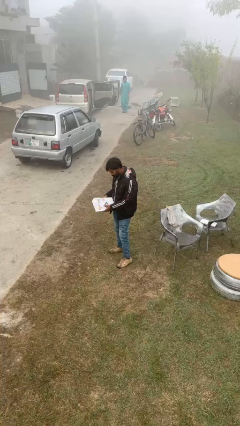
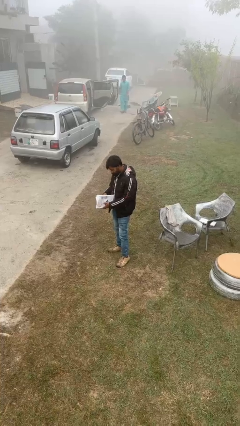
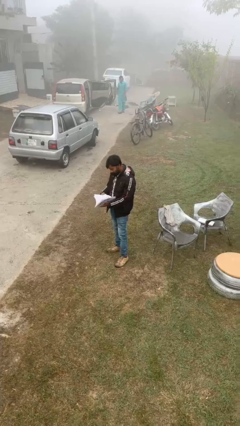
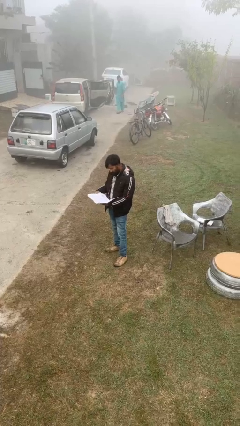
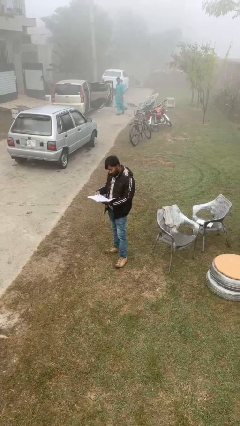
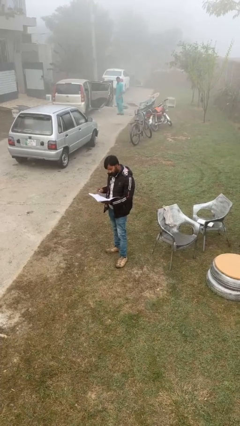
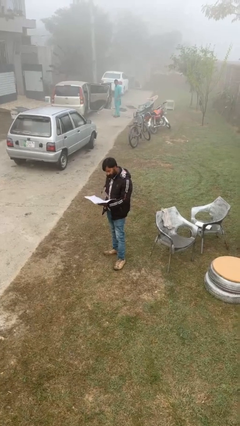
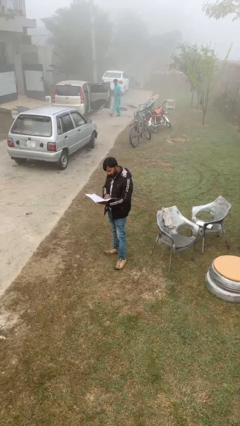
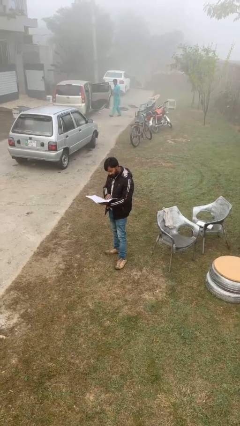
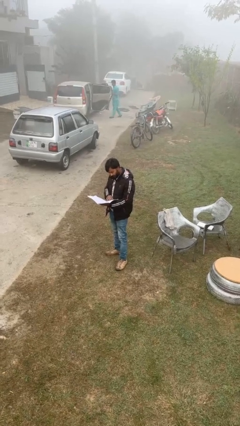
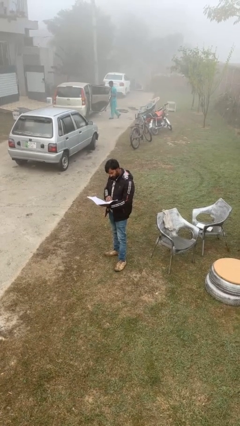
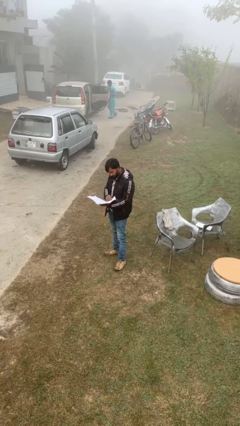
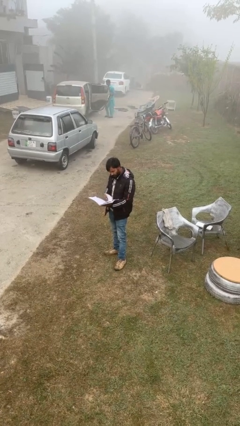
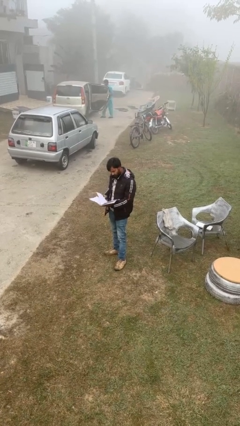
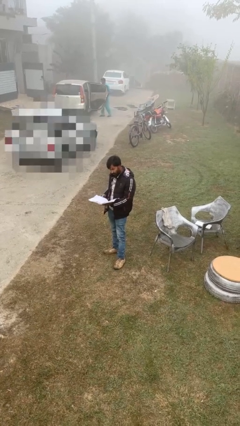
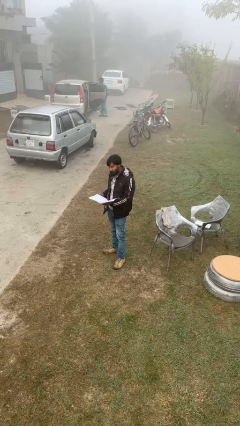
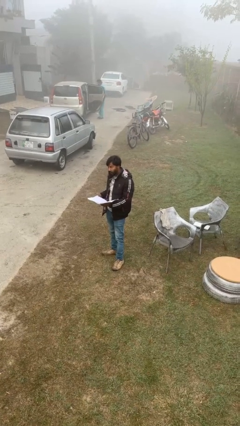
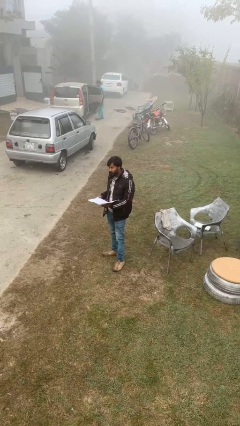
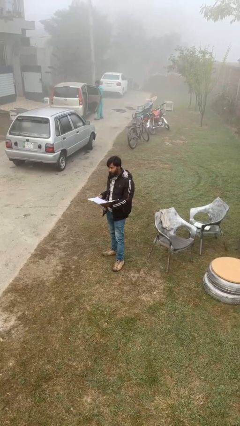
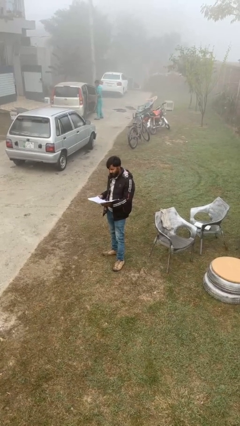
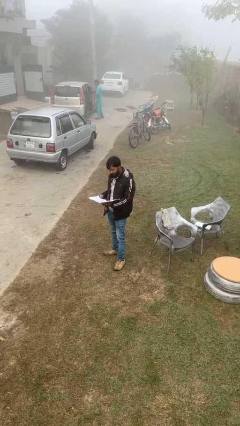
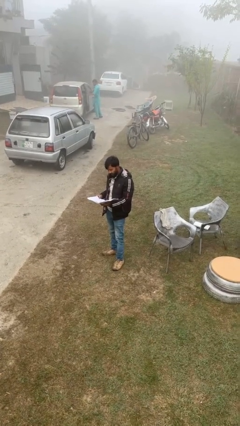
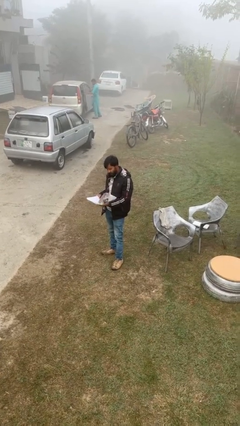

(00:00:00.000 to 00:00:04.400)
person reads document

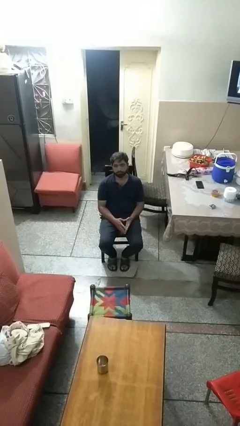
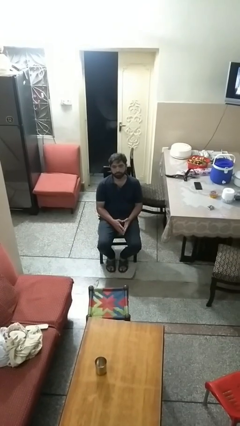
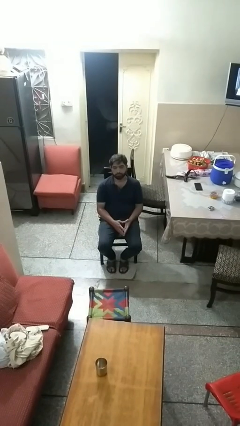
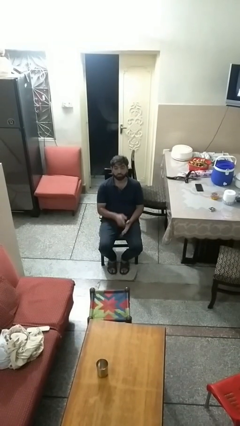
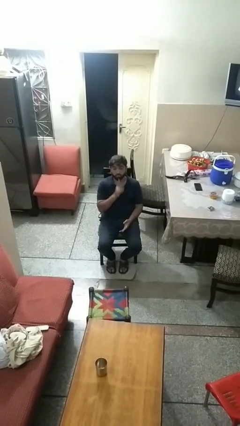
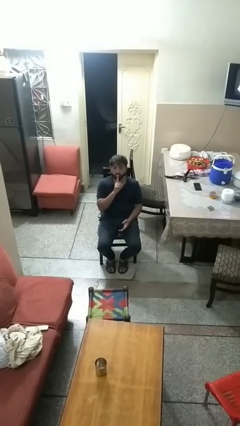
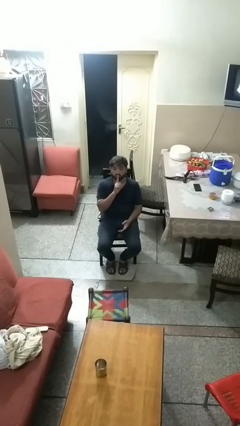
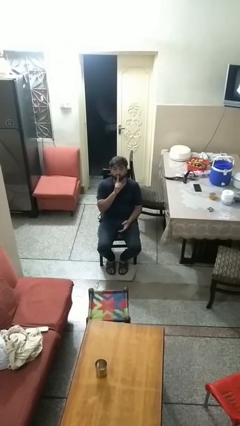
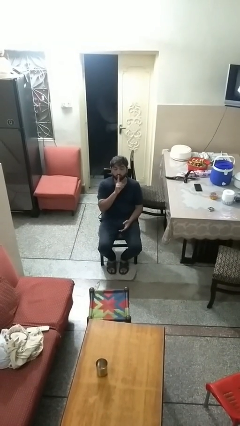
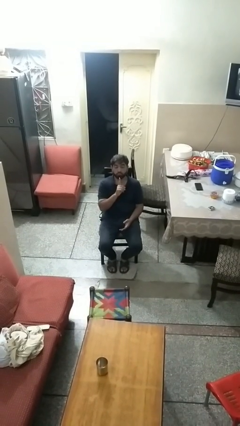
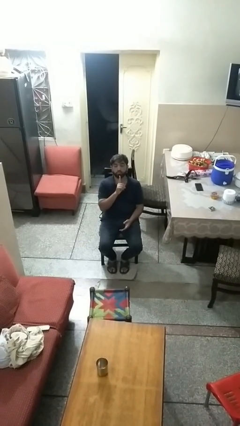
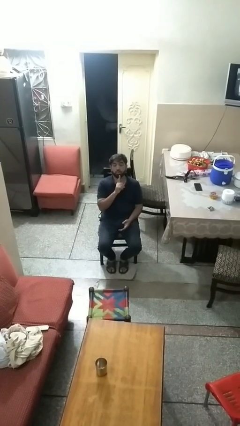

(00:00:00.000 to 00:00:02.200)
person gestures be quiet

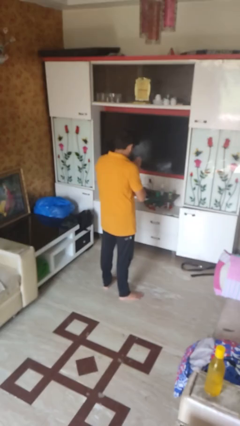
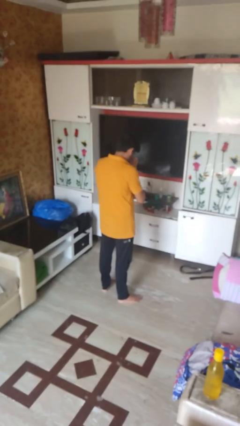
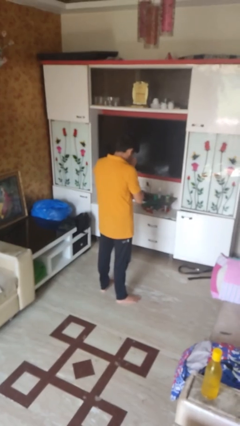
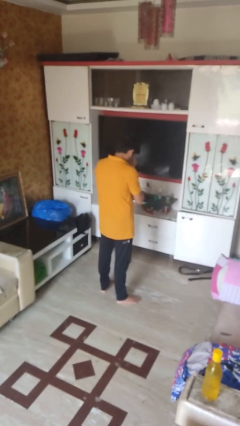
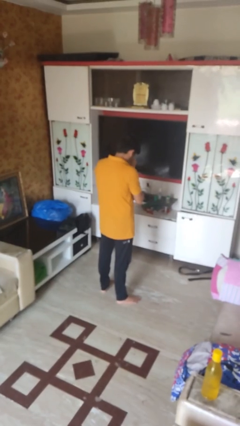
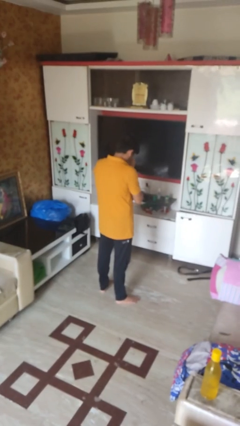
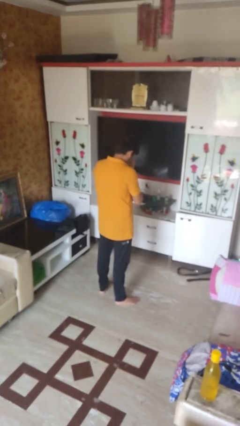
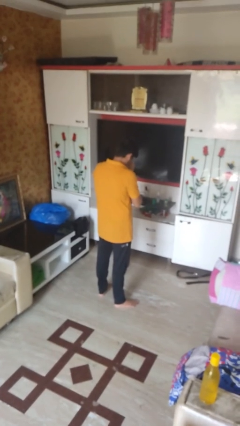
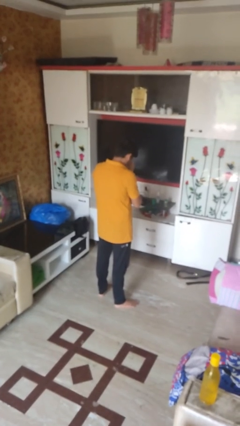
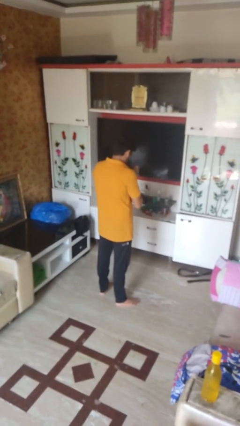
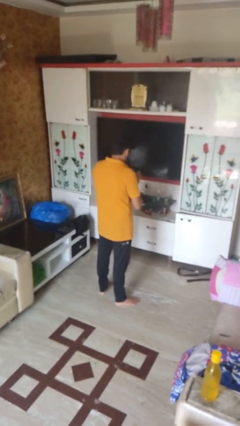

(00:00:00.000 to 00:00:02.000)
person prays

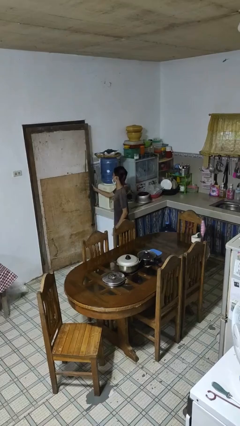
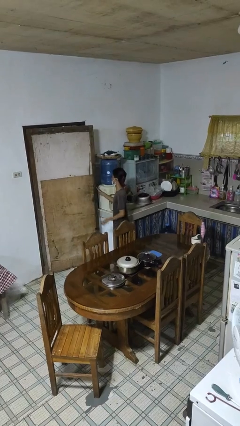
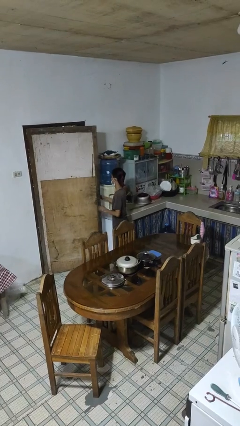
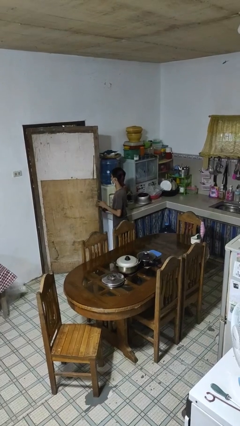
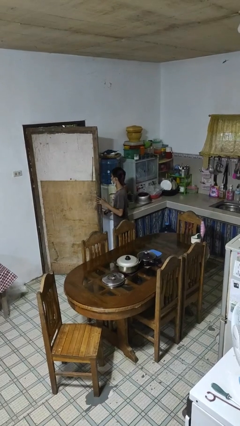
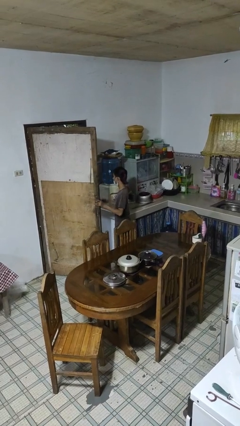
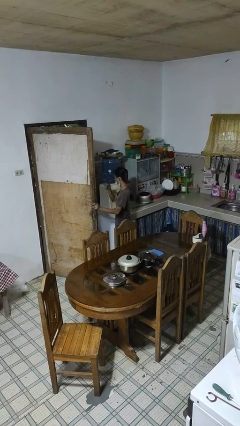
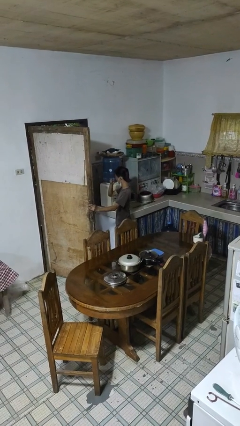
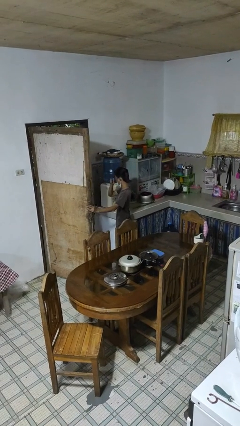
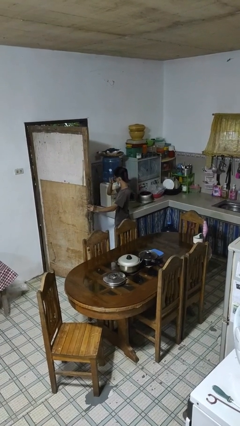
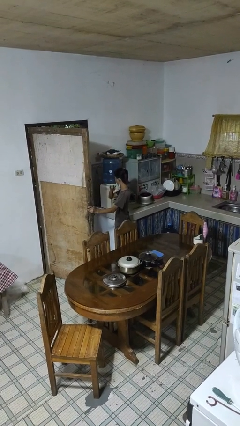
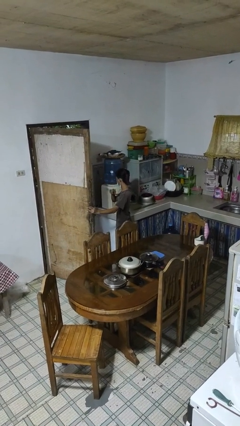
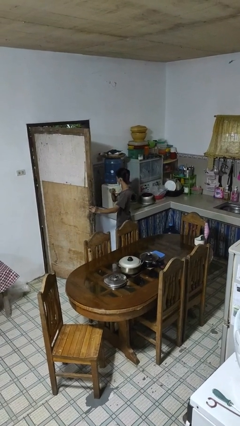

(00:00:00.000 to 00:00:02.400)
person opens facility door

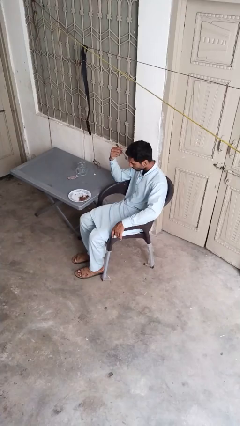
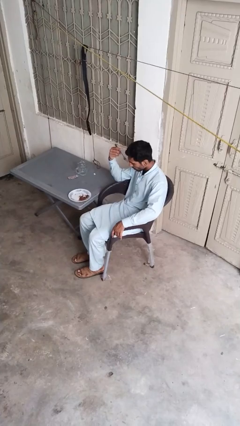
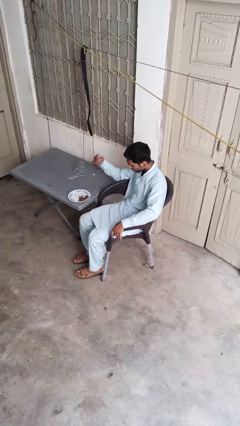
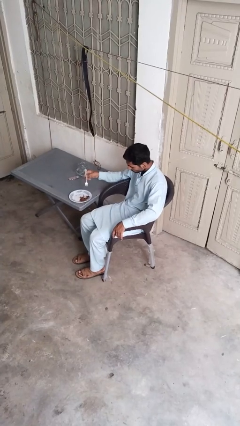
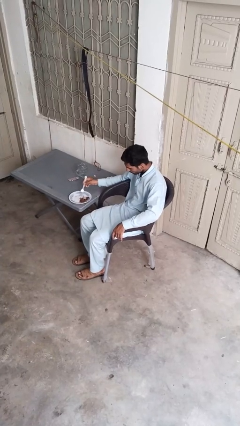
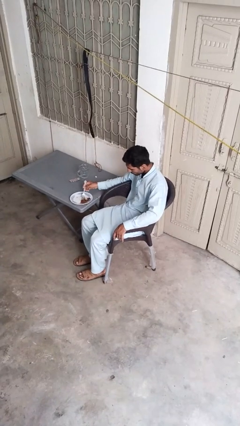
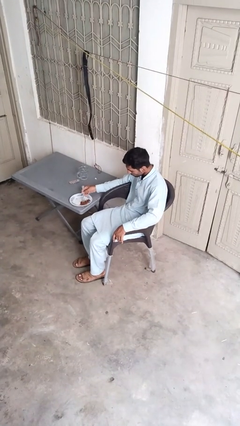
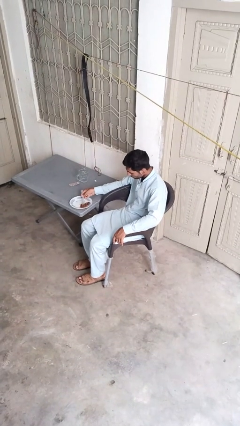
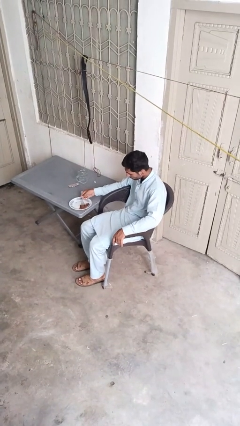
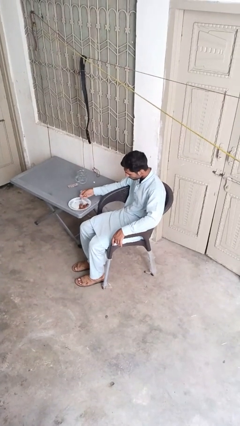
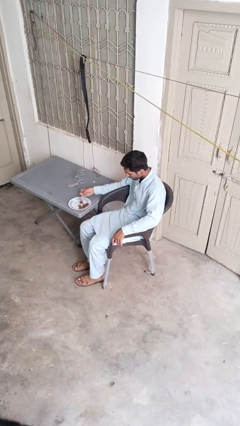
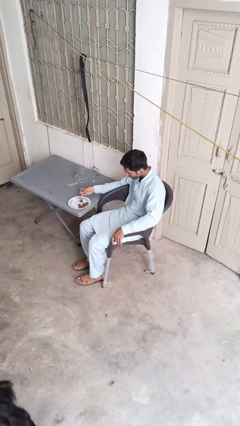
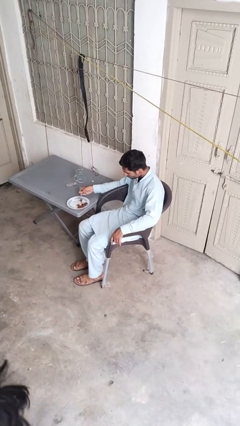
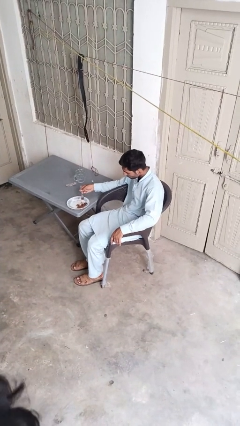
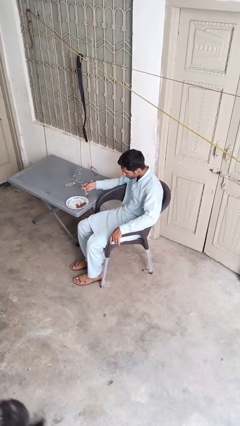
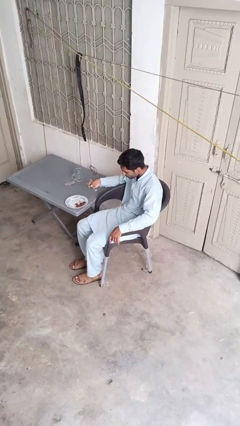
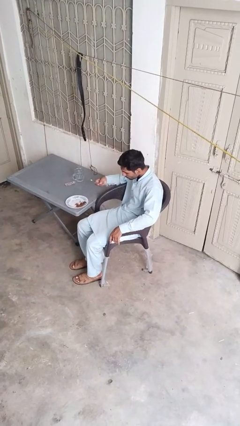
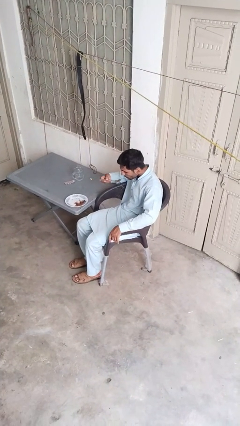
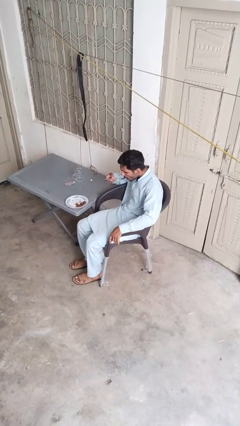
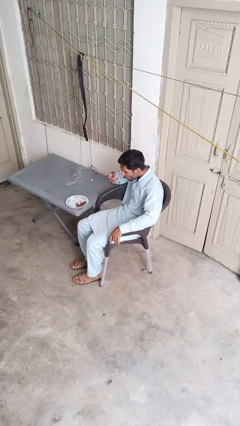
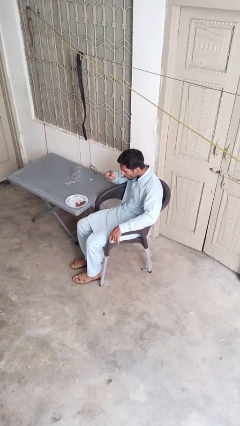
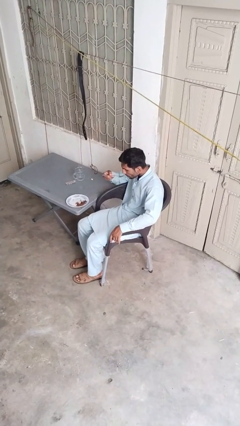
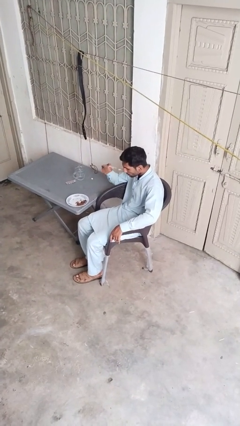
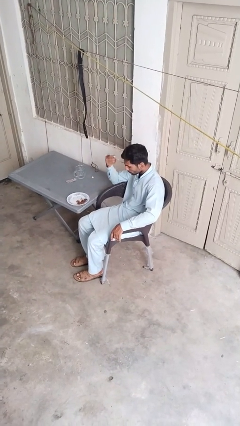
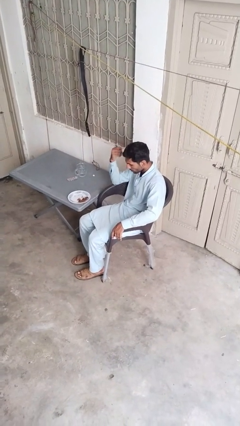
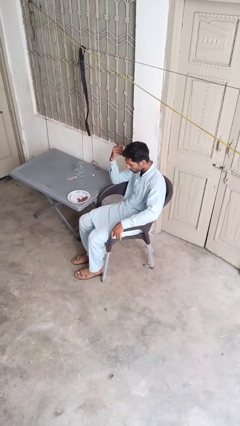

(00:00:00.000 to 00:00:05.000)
person eats with utensil

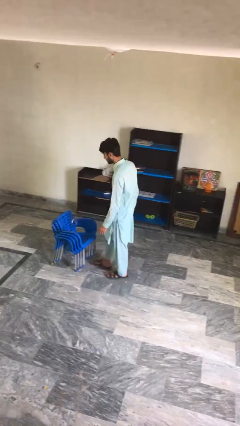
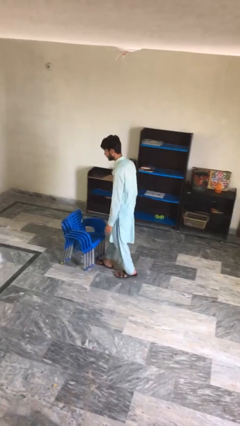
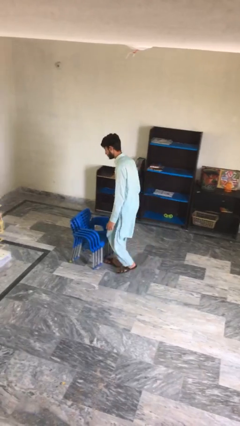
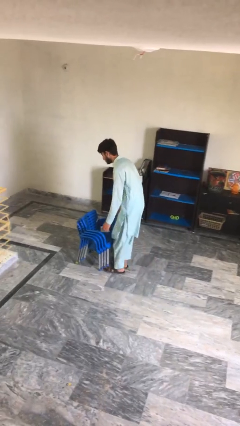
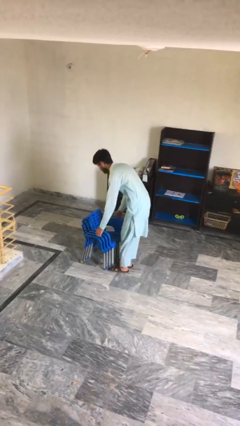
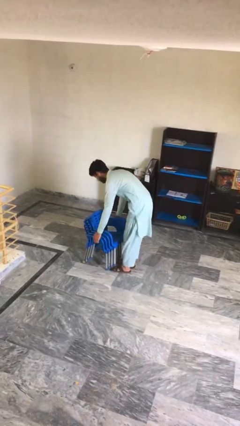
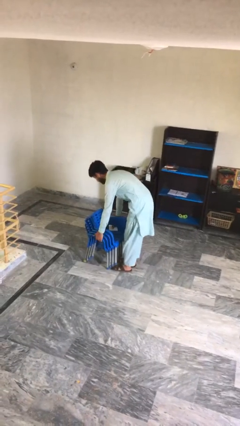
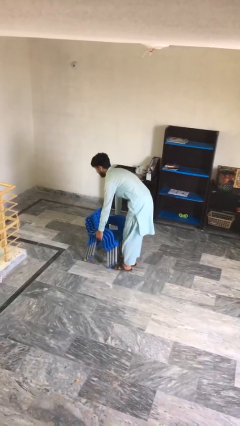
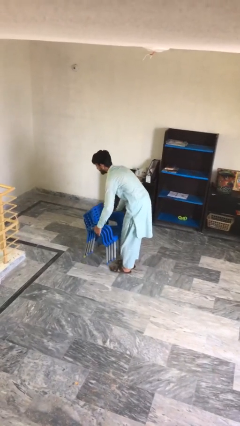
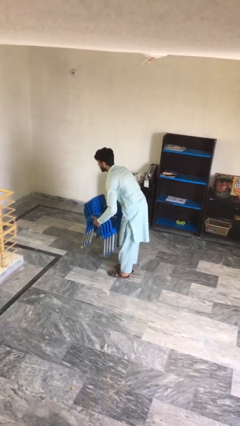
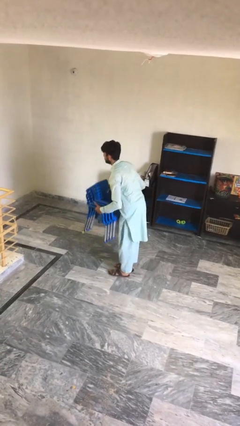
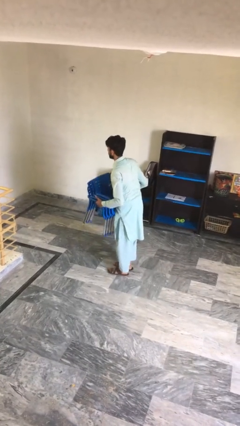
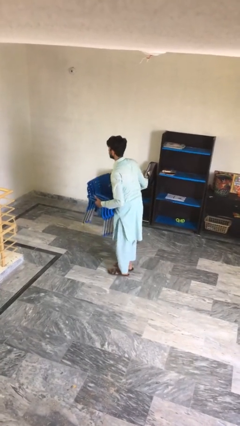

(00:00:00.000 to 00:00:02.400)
person picks up object from floor
